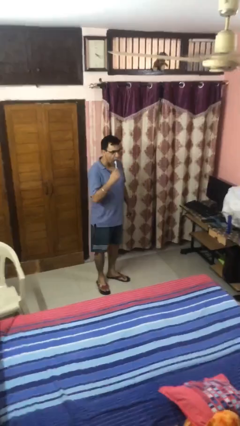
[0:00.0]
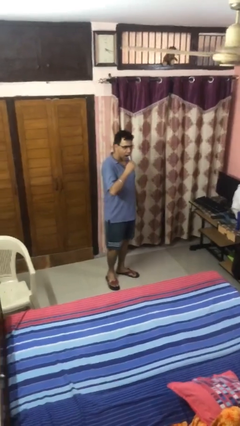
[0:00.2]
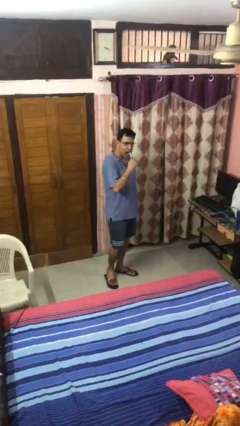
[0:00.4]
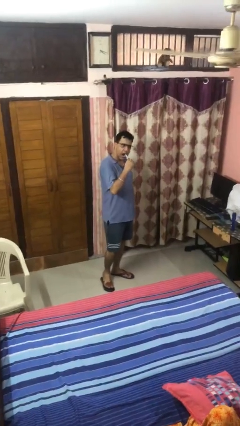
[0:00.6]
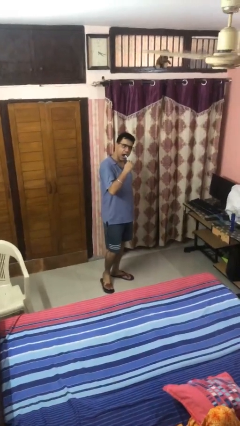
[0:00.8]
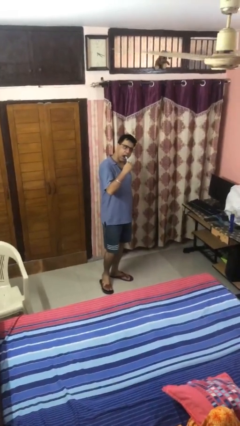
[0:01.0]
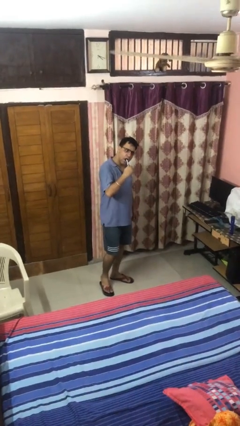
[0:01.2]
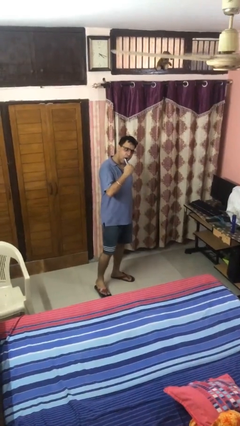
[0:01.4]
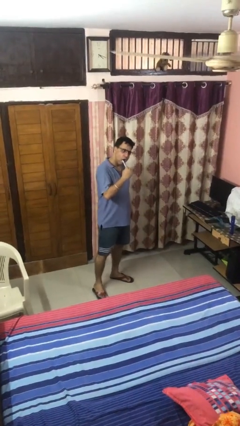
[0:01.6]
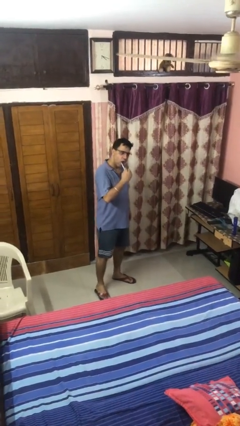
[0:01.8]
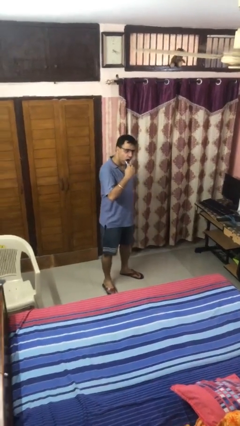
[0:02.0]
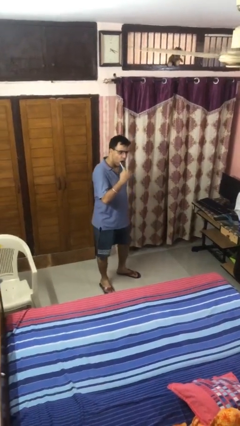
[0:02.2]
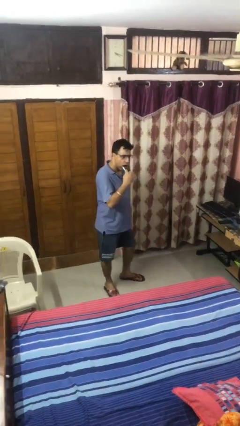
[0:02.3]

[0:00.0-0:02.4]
person brushes teeth

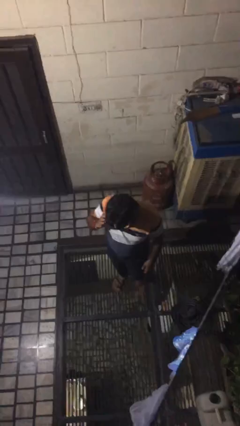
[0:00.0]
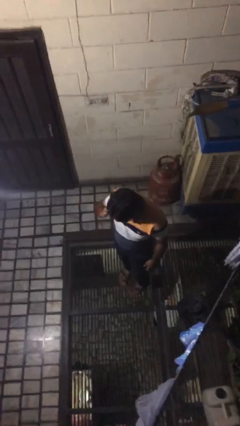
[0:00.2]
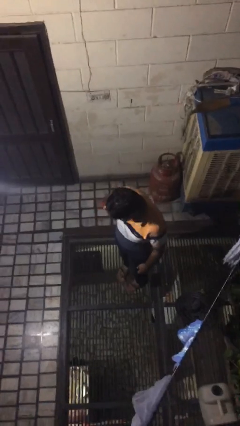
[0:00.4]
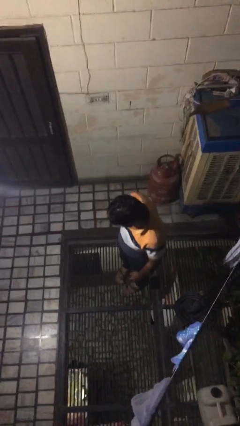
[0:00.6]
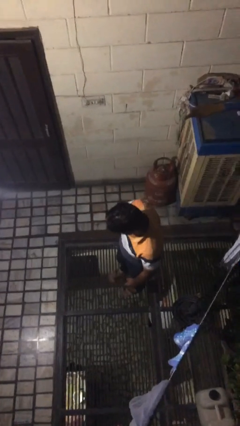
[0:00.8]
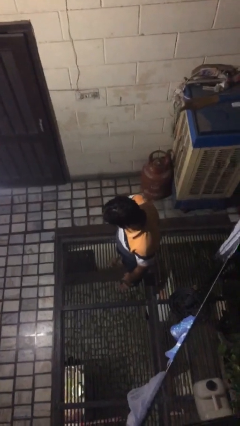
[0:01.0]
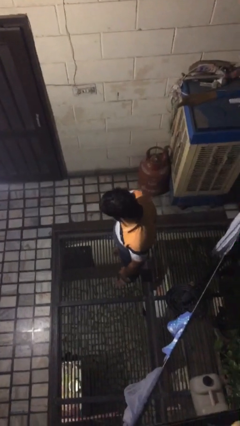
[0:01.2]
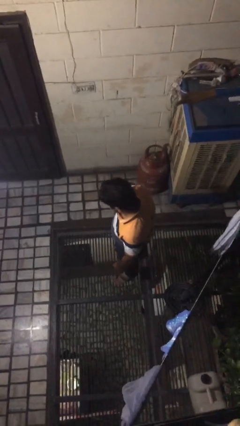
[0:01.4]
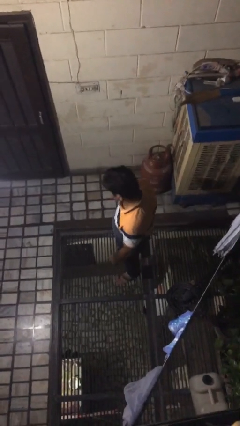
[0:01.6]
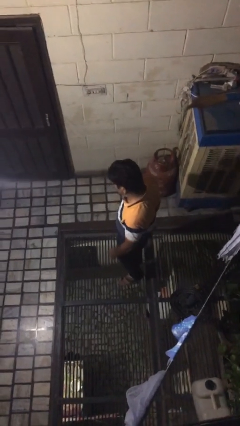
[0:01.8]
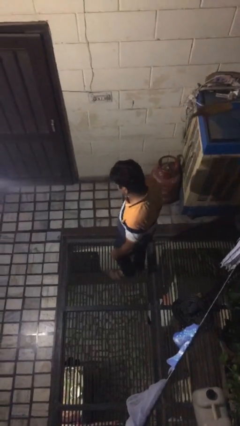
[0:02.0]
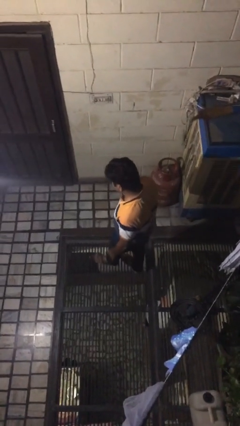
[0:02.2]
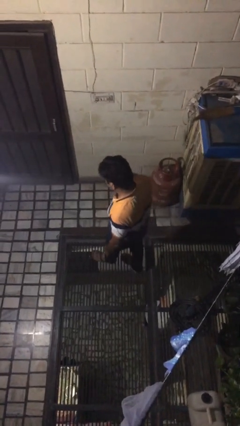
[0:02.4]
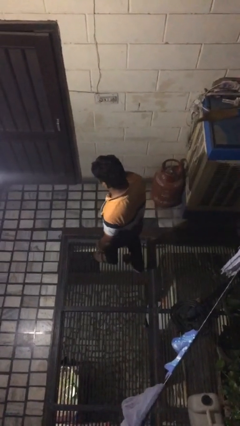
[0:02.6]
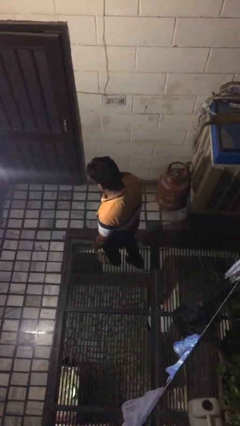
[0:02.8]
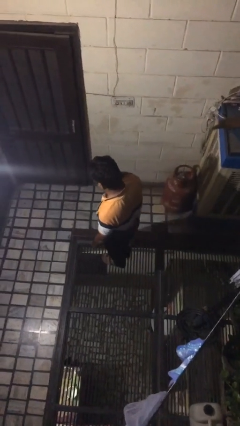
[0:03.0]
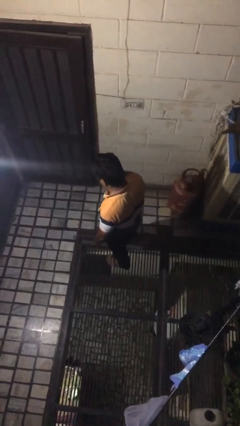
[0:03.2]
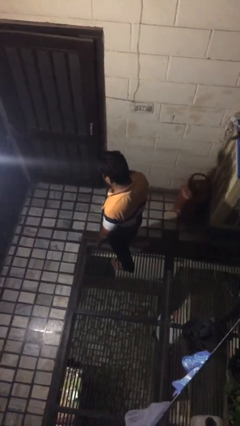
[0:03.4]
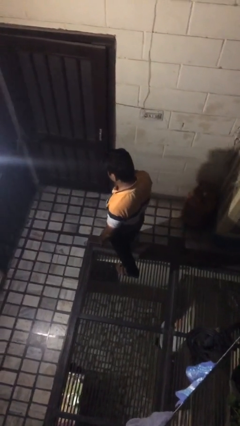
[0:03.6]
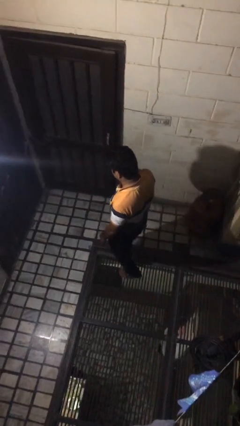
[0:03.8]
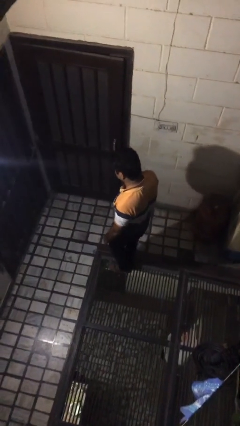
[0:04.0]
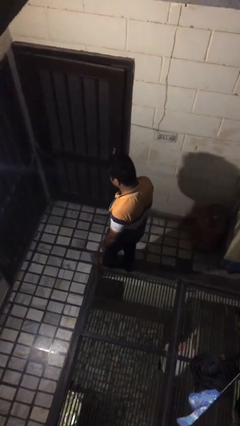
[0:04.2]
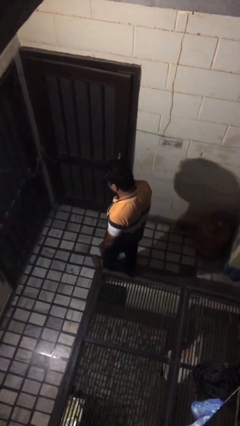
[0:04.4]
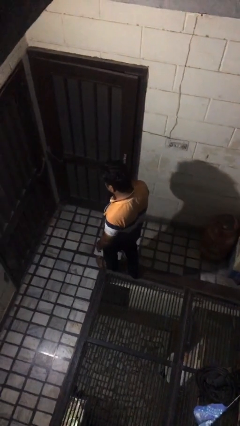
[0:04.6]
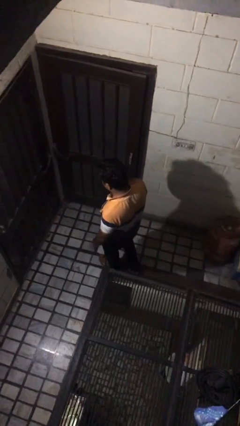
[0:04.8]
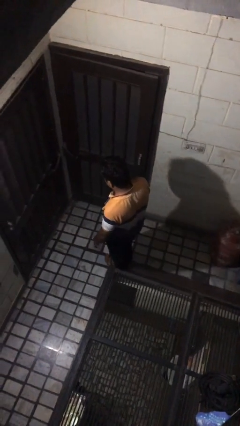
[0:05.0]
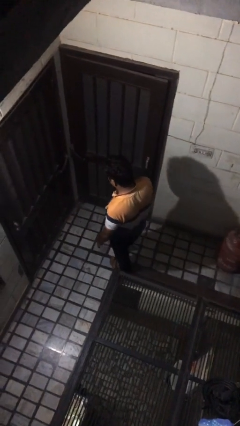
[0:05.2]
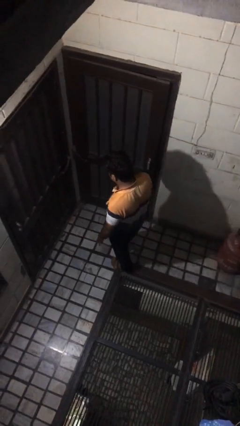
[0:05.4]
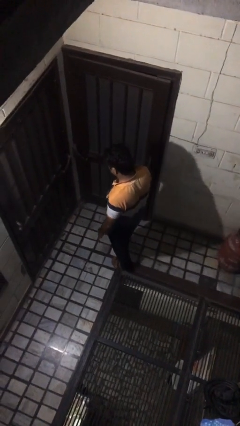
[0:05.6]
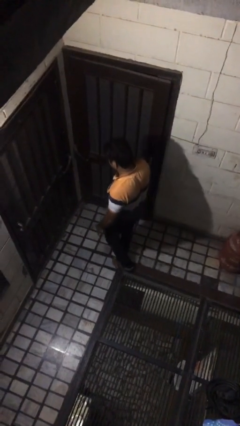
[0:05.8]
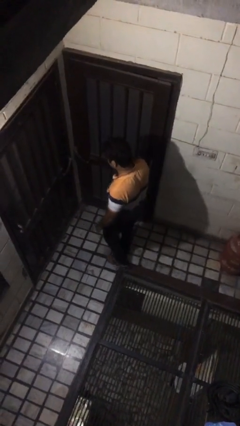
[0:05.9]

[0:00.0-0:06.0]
person talks on phone

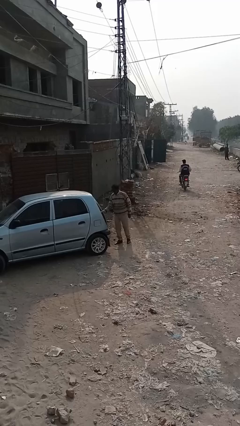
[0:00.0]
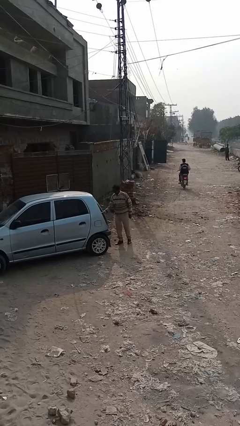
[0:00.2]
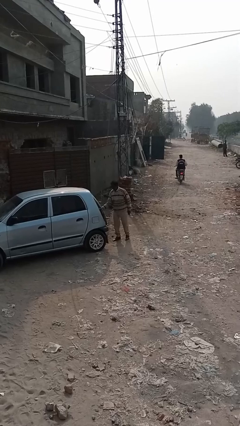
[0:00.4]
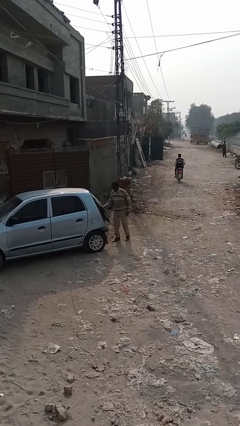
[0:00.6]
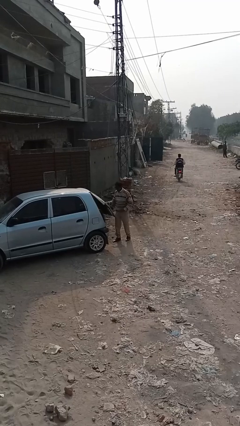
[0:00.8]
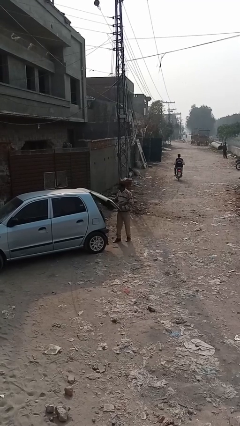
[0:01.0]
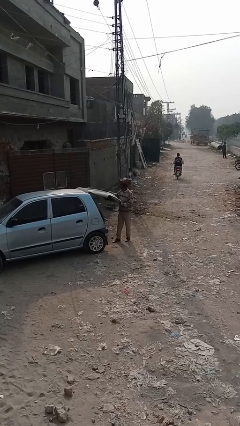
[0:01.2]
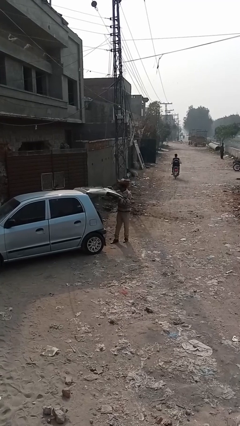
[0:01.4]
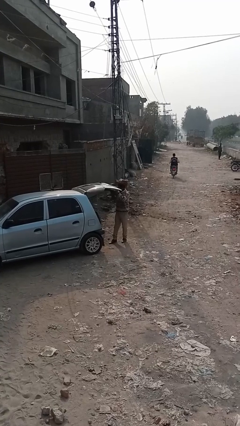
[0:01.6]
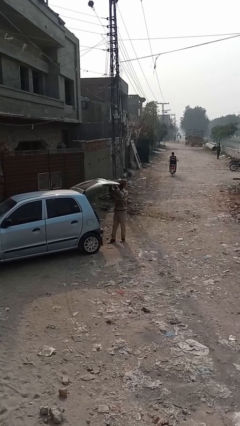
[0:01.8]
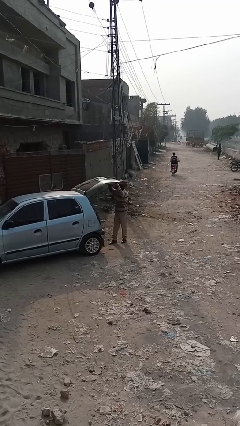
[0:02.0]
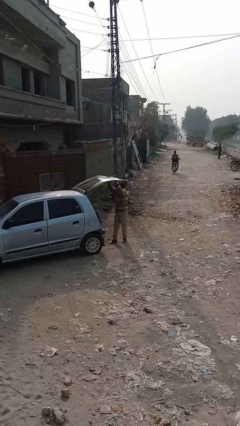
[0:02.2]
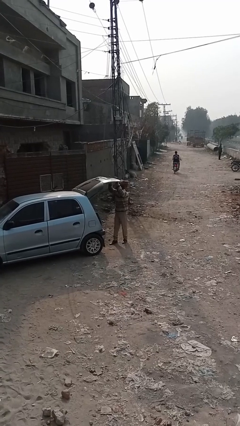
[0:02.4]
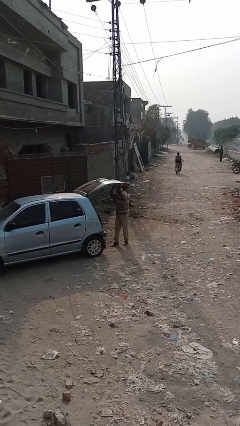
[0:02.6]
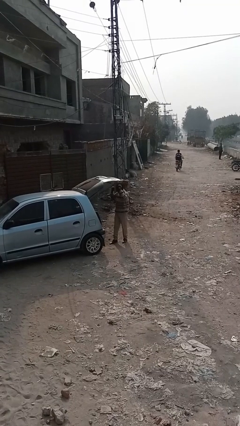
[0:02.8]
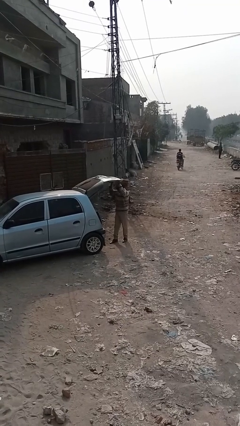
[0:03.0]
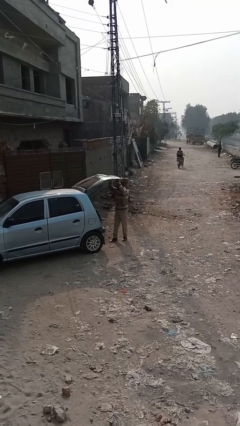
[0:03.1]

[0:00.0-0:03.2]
person opens car trunk

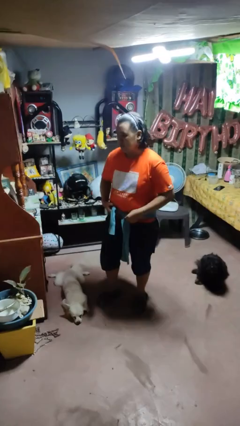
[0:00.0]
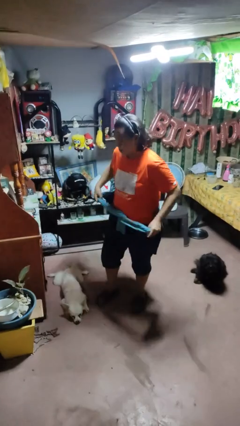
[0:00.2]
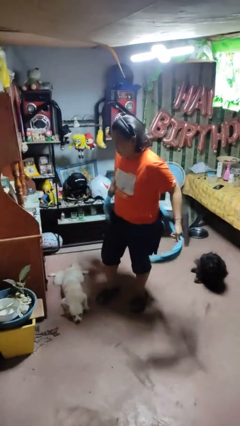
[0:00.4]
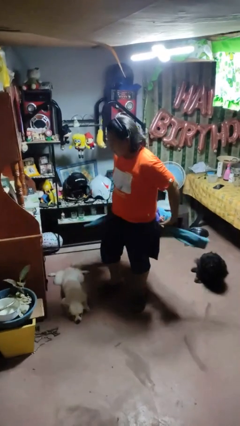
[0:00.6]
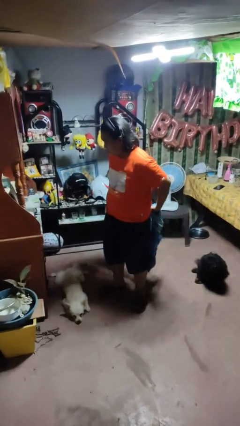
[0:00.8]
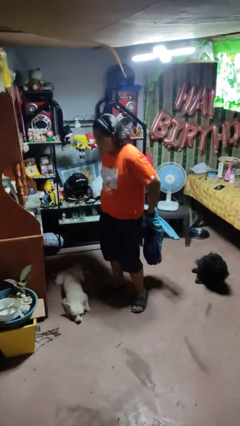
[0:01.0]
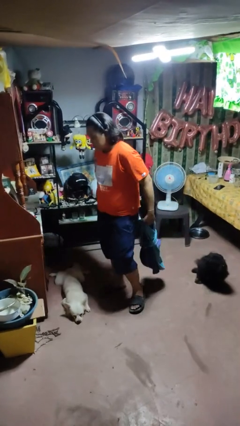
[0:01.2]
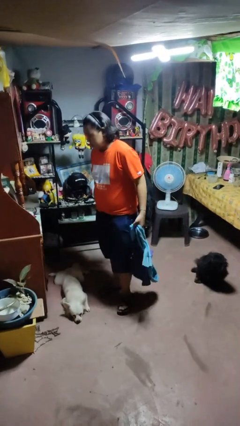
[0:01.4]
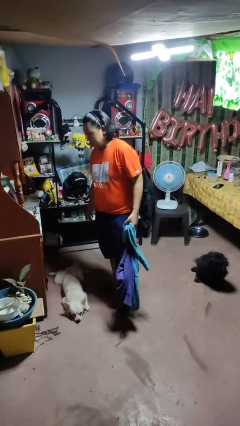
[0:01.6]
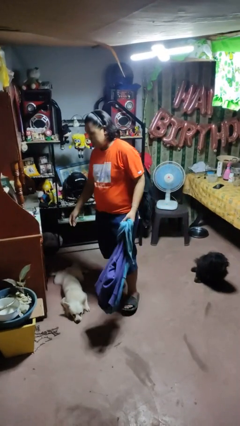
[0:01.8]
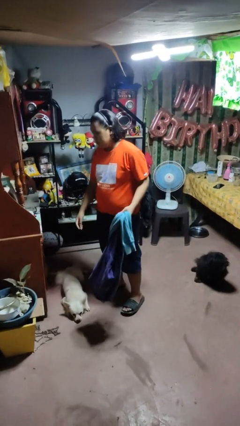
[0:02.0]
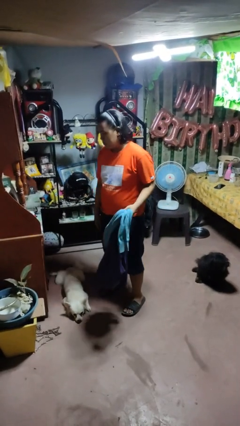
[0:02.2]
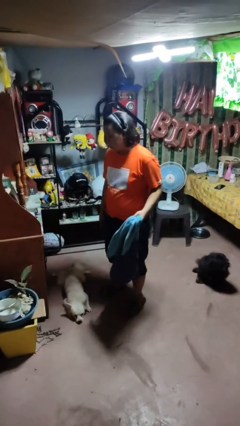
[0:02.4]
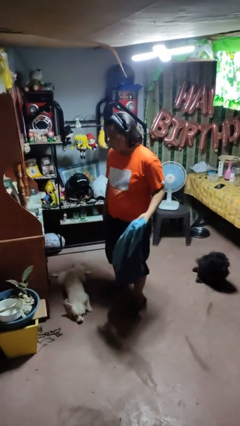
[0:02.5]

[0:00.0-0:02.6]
person unties jacket around waist

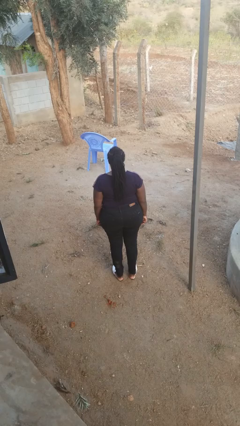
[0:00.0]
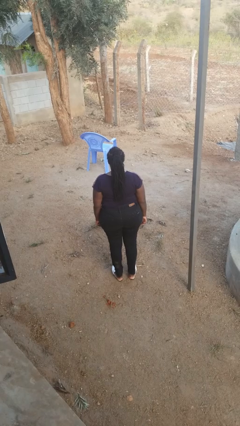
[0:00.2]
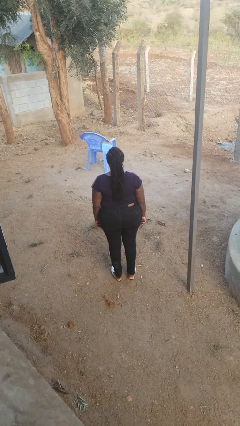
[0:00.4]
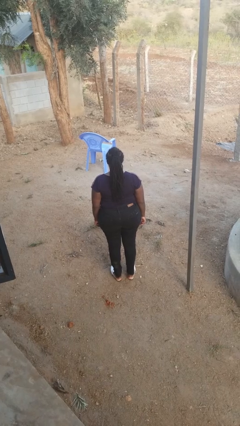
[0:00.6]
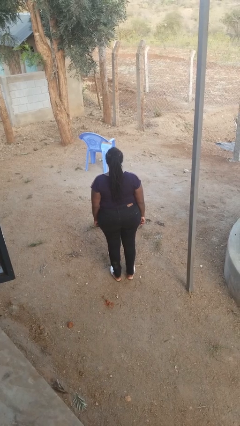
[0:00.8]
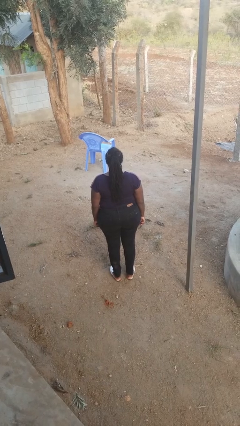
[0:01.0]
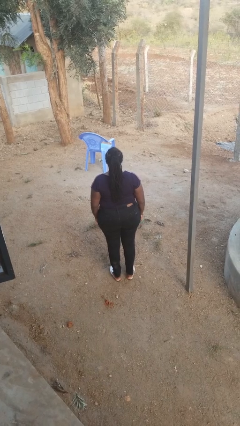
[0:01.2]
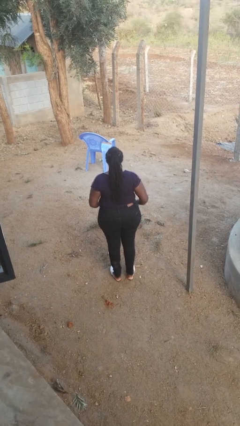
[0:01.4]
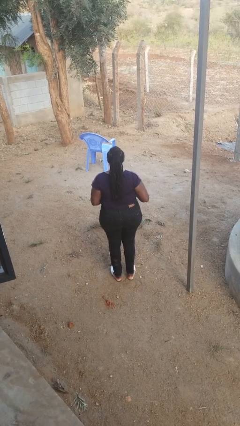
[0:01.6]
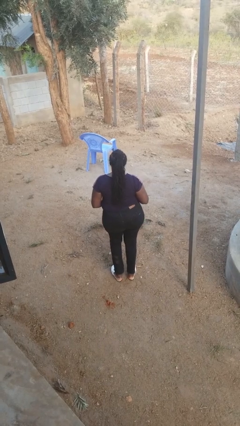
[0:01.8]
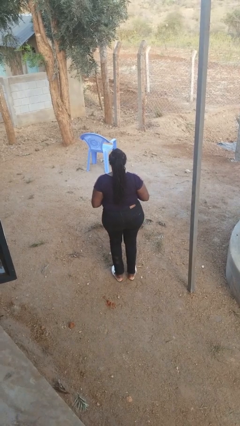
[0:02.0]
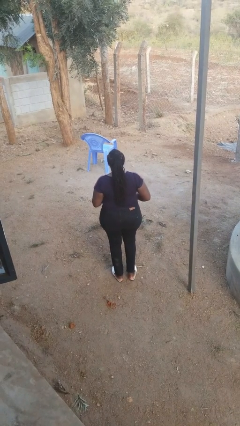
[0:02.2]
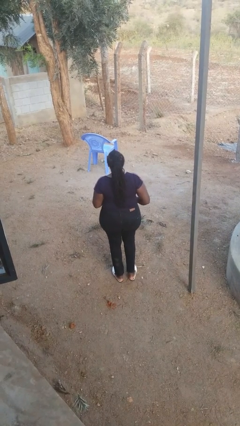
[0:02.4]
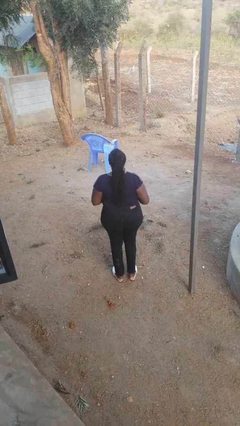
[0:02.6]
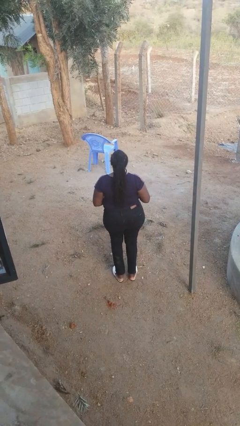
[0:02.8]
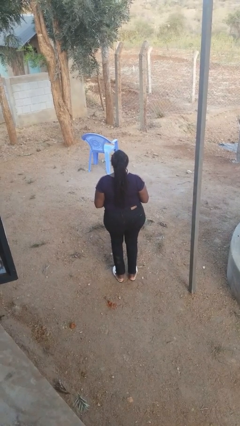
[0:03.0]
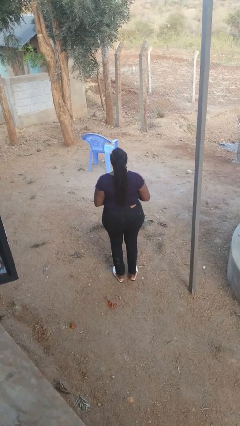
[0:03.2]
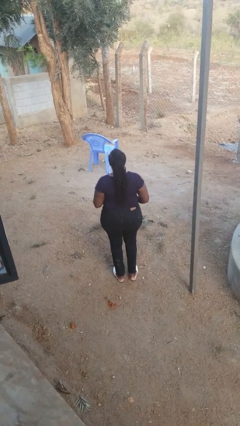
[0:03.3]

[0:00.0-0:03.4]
person wiggles hips
